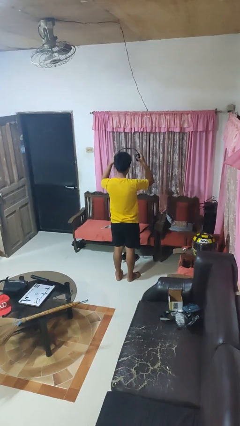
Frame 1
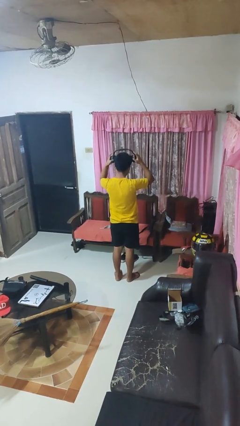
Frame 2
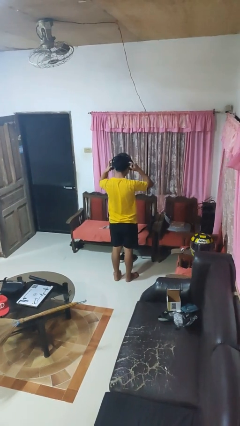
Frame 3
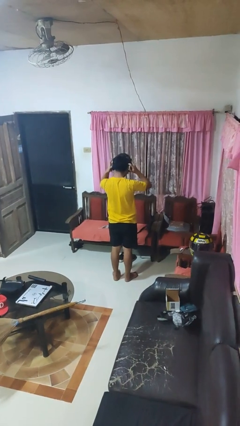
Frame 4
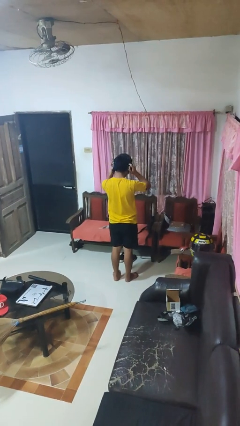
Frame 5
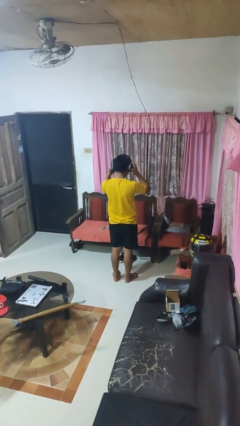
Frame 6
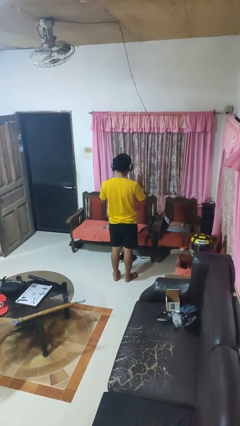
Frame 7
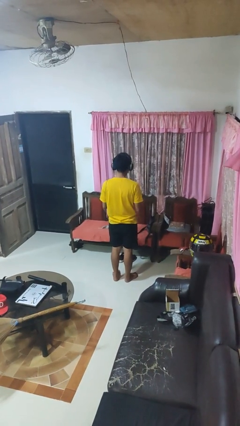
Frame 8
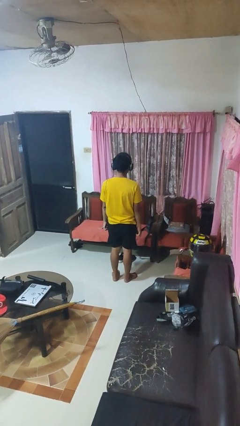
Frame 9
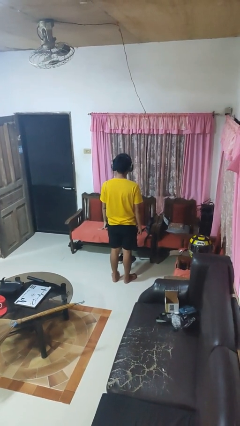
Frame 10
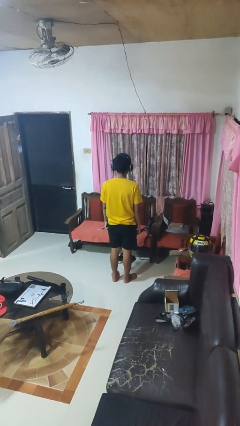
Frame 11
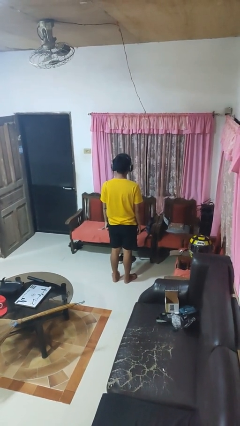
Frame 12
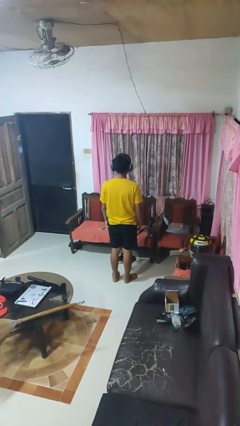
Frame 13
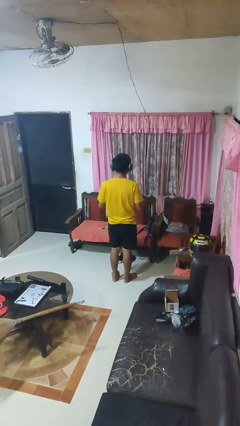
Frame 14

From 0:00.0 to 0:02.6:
person puts on headphones

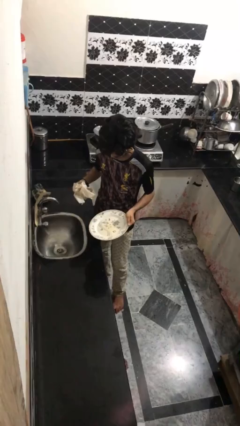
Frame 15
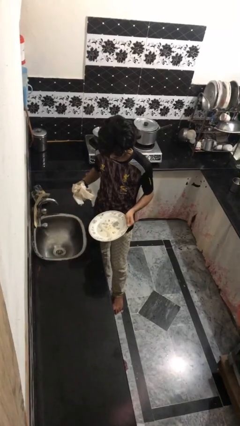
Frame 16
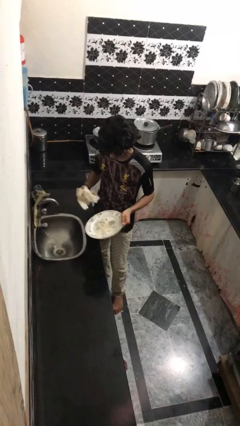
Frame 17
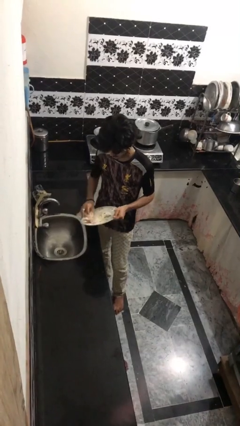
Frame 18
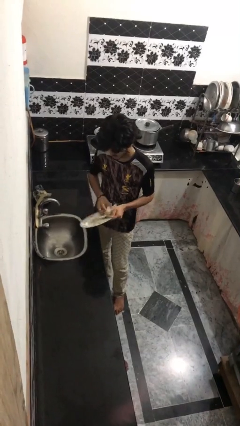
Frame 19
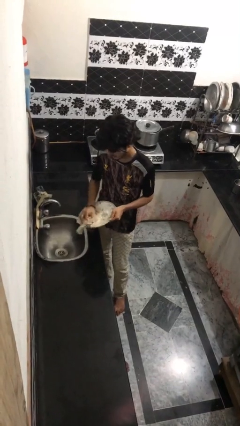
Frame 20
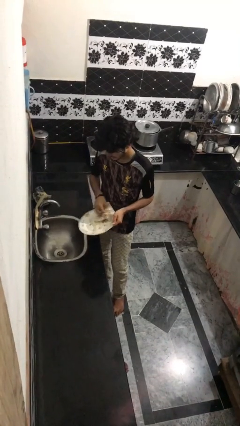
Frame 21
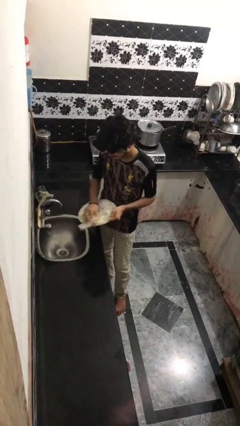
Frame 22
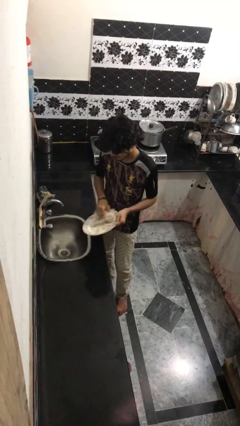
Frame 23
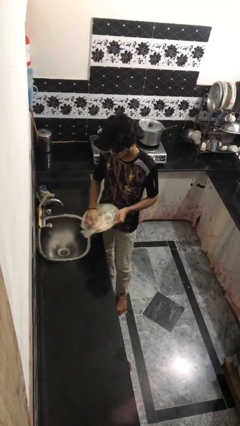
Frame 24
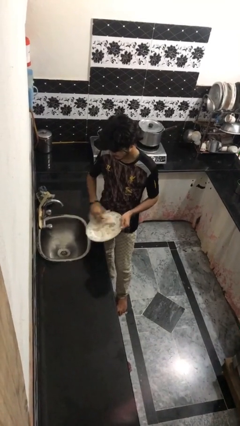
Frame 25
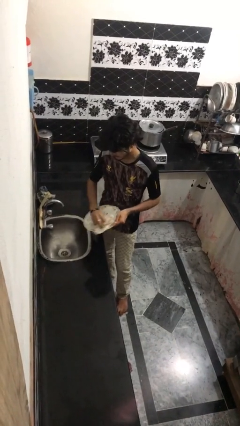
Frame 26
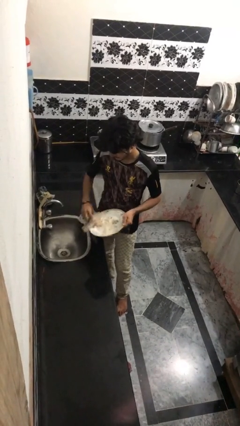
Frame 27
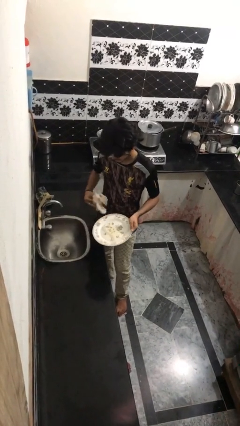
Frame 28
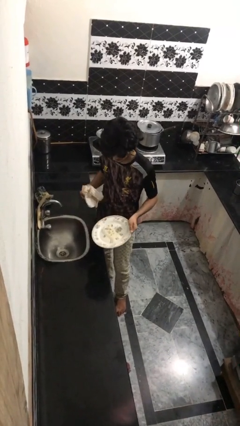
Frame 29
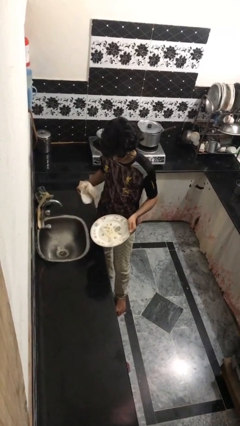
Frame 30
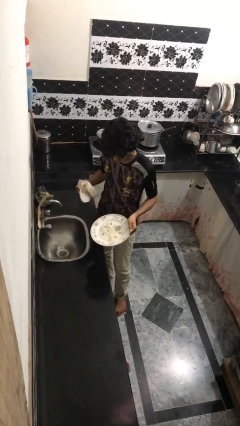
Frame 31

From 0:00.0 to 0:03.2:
person dries dish

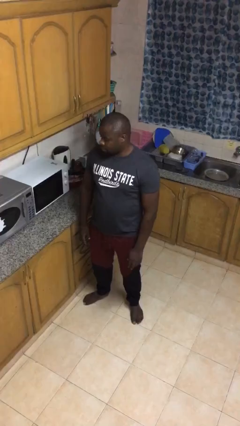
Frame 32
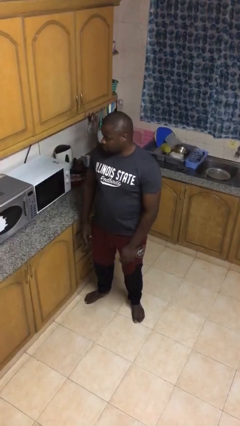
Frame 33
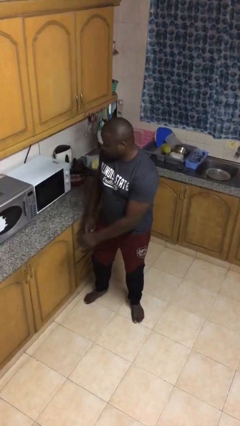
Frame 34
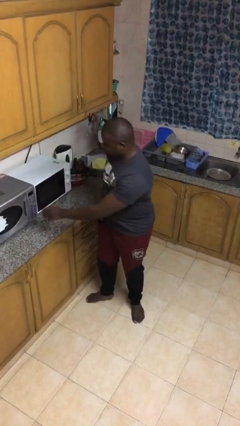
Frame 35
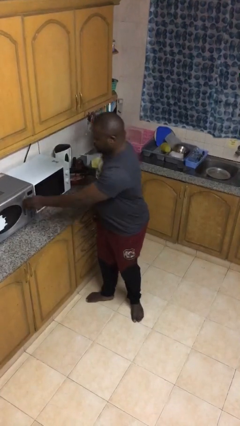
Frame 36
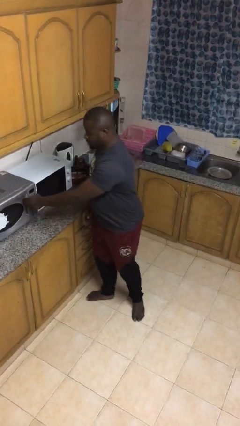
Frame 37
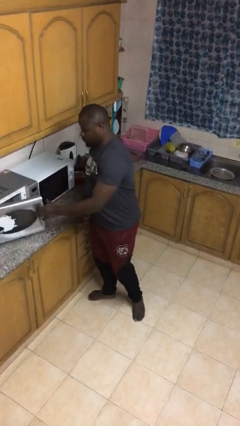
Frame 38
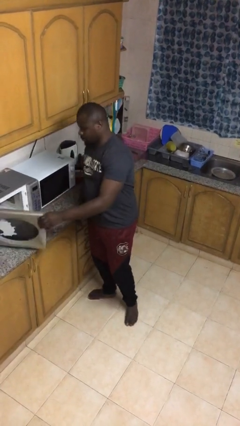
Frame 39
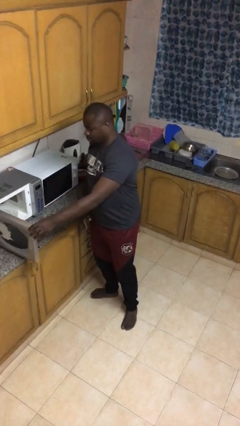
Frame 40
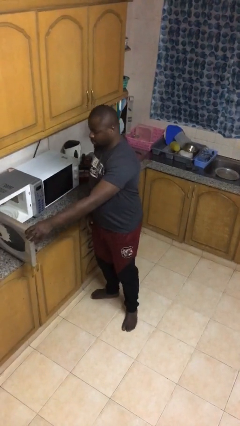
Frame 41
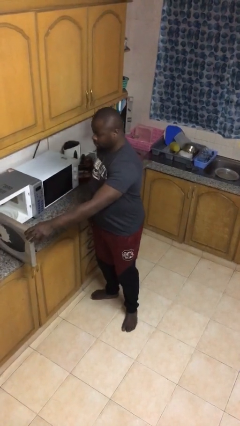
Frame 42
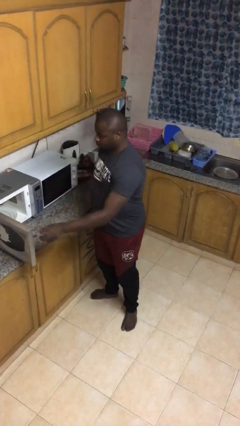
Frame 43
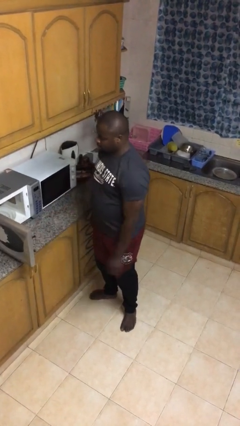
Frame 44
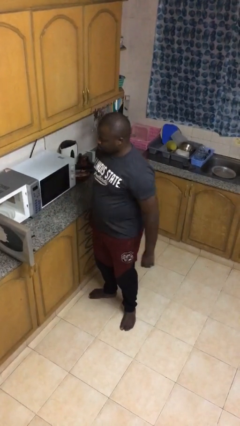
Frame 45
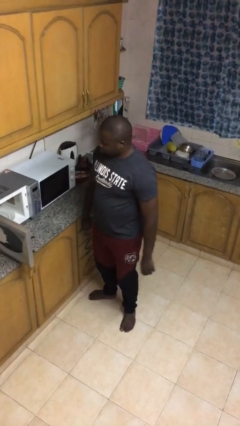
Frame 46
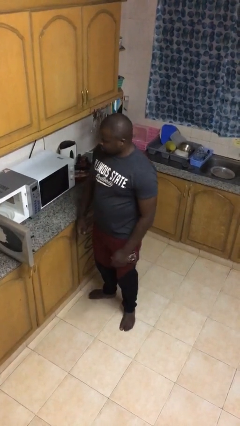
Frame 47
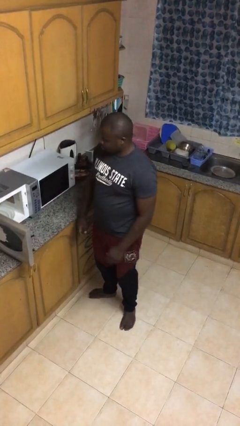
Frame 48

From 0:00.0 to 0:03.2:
person opens microwave

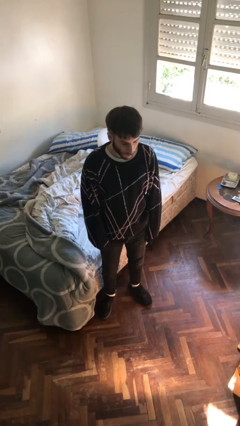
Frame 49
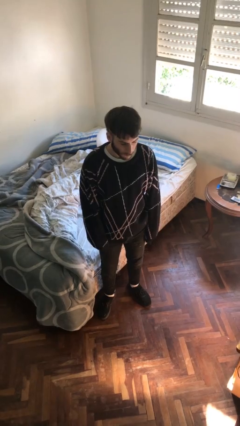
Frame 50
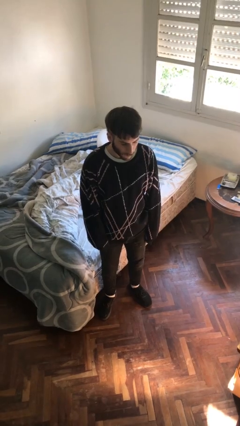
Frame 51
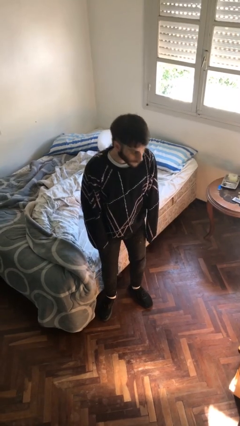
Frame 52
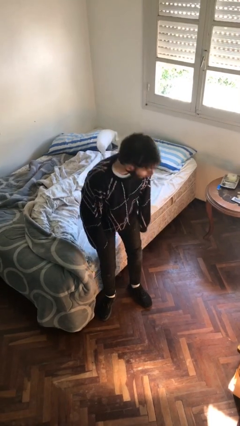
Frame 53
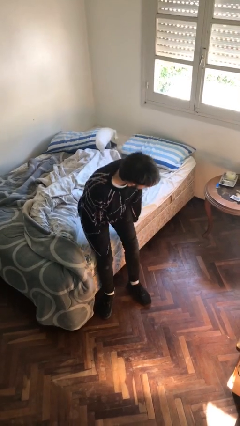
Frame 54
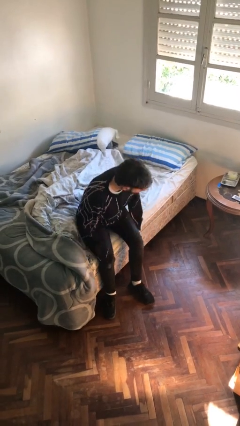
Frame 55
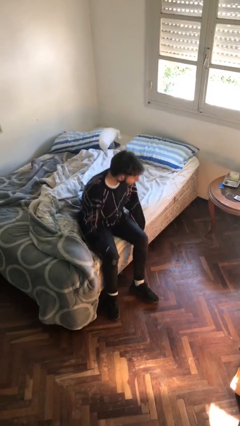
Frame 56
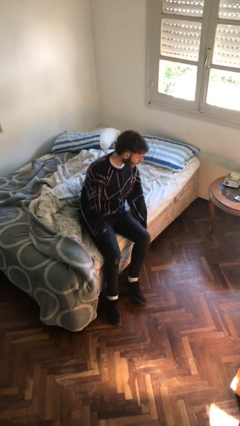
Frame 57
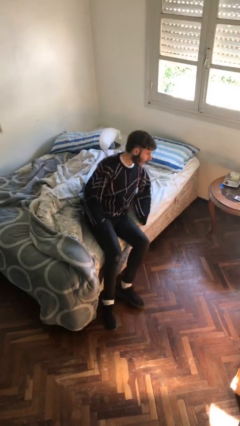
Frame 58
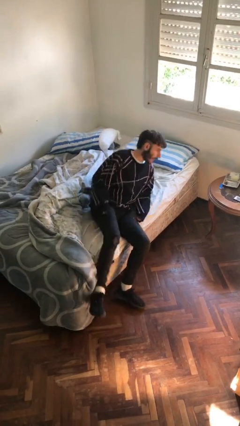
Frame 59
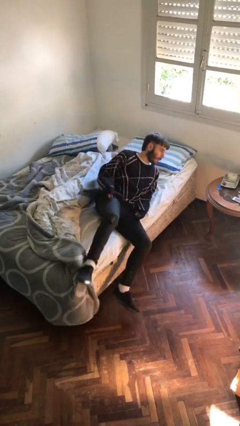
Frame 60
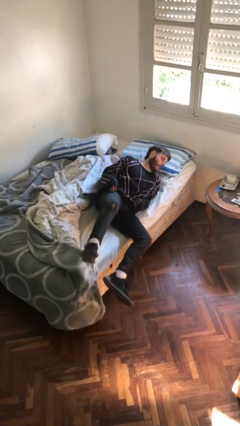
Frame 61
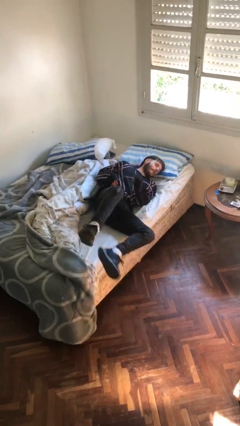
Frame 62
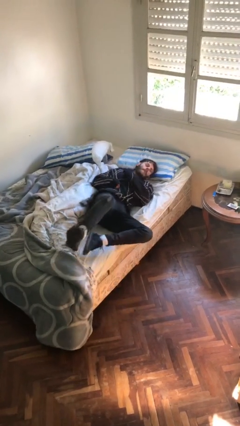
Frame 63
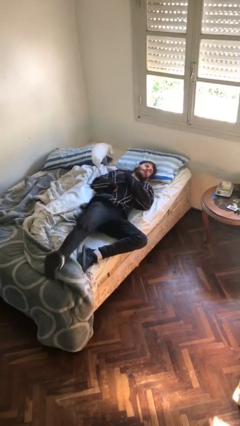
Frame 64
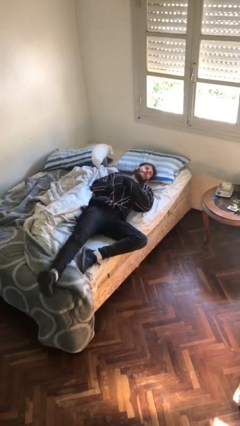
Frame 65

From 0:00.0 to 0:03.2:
person lies down on bed

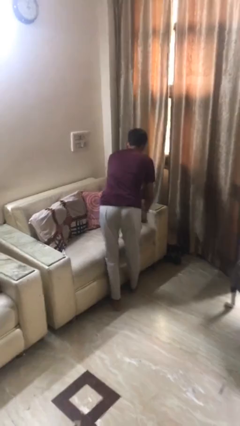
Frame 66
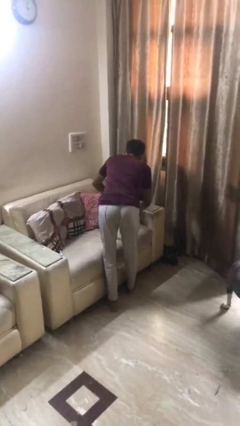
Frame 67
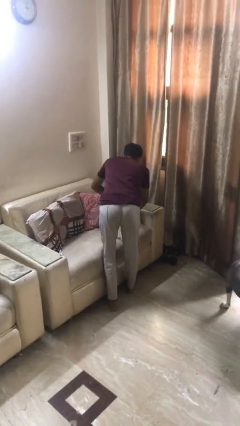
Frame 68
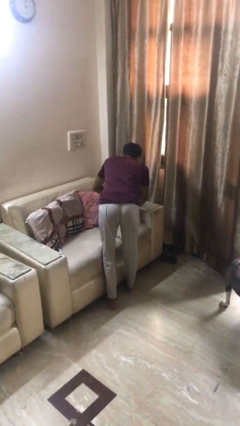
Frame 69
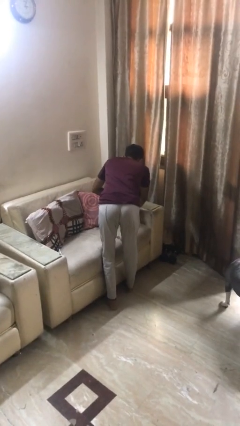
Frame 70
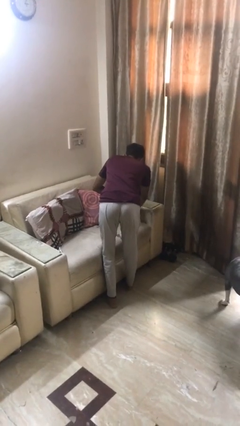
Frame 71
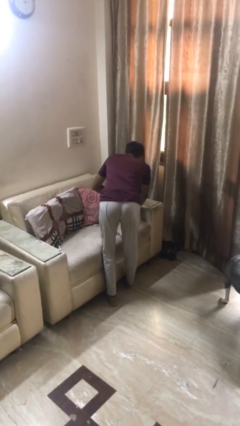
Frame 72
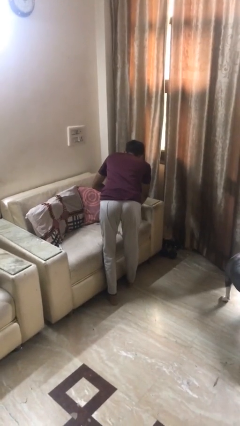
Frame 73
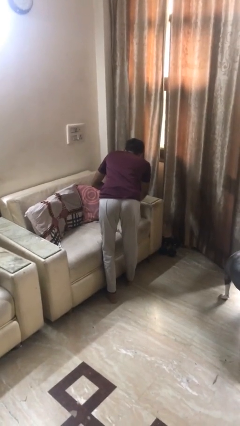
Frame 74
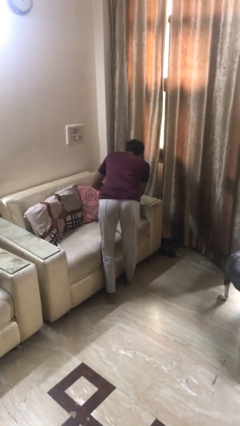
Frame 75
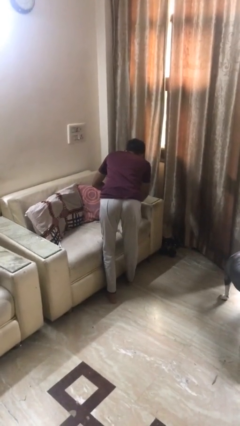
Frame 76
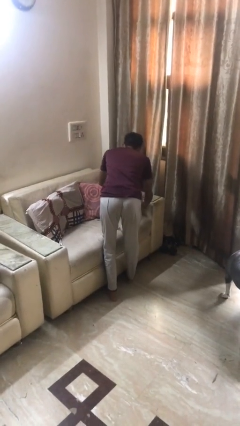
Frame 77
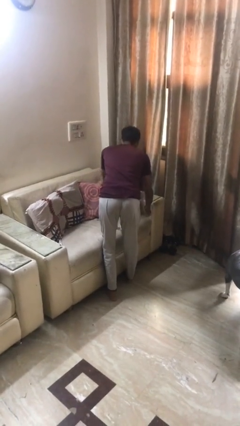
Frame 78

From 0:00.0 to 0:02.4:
person searches in couch

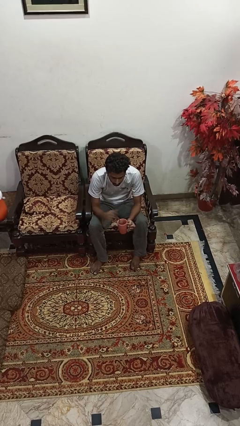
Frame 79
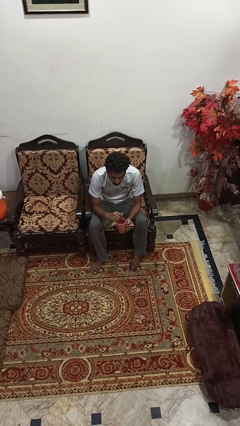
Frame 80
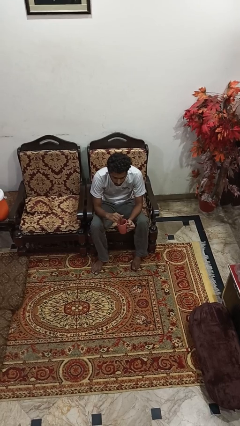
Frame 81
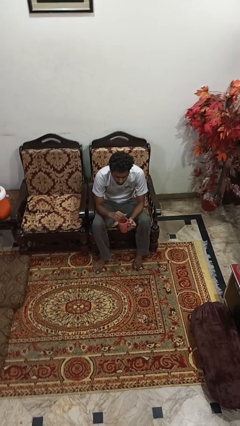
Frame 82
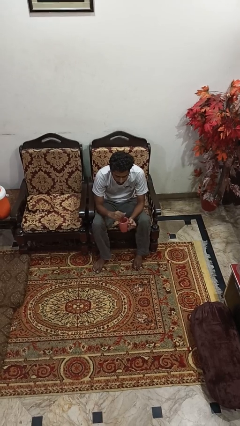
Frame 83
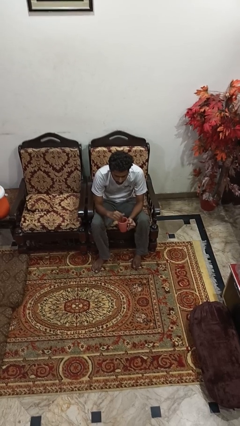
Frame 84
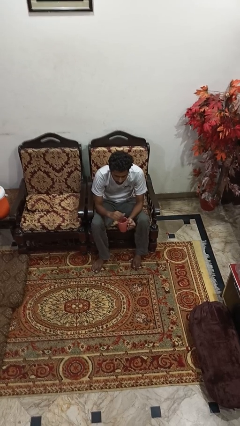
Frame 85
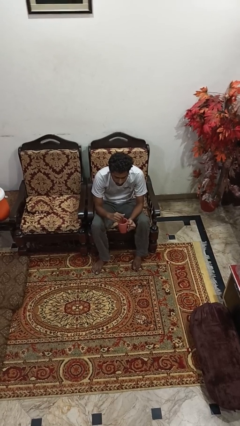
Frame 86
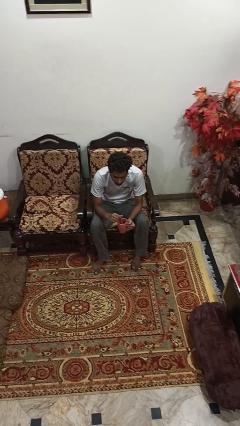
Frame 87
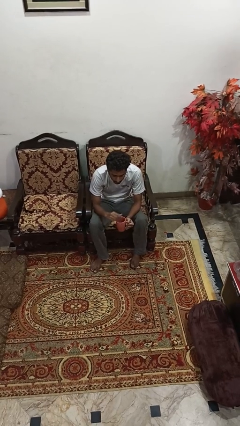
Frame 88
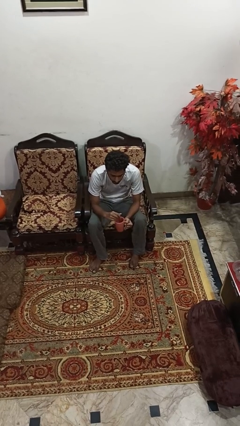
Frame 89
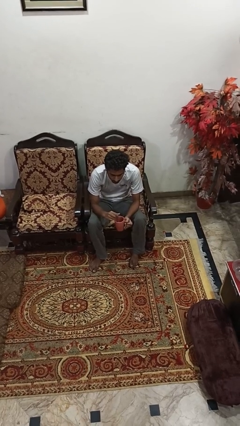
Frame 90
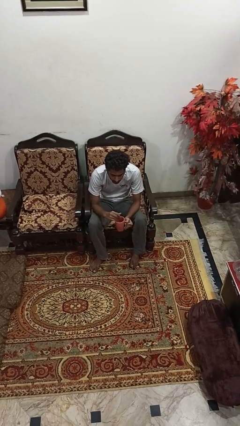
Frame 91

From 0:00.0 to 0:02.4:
person stirs mug

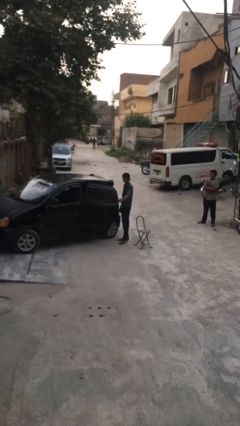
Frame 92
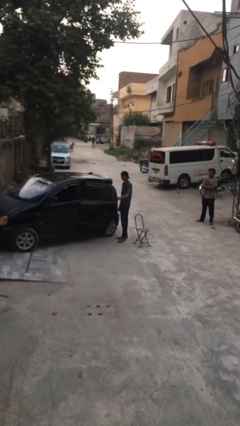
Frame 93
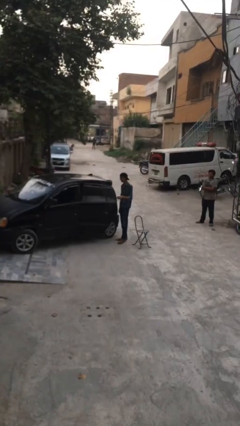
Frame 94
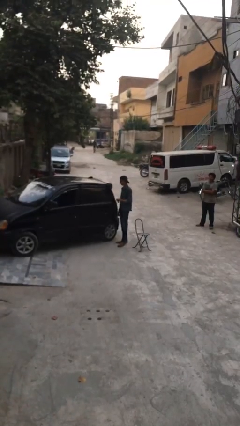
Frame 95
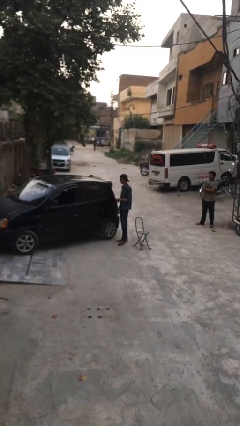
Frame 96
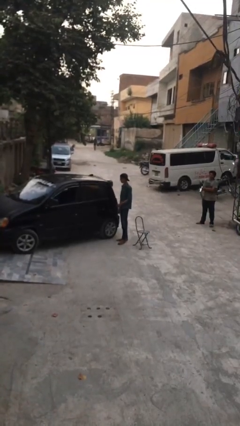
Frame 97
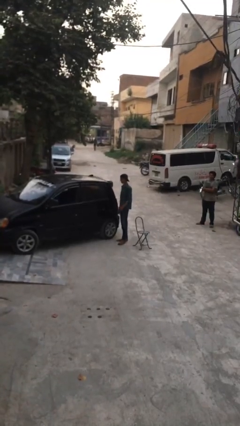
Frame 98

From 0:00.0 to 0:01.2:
person closes car door
